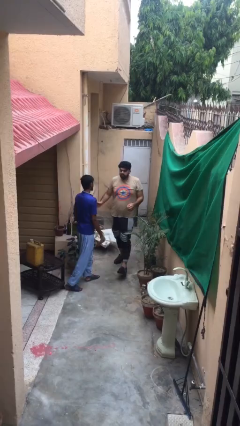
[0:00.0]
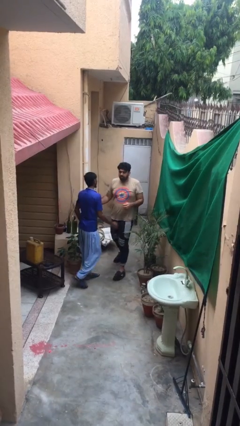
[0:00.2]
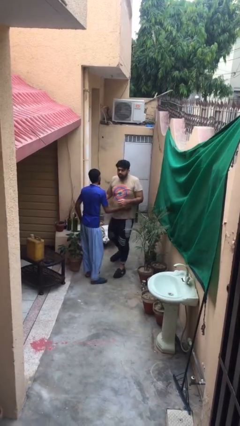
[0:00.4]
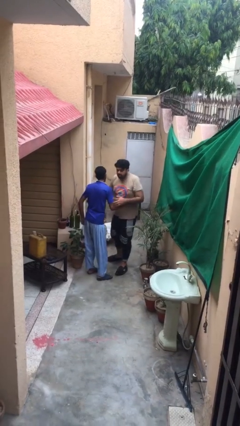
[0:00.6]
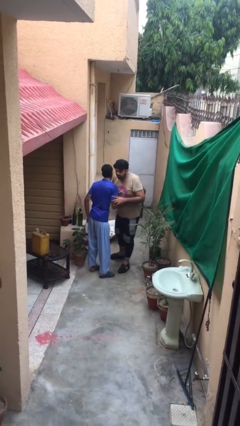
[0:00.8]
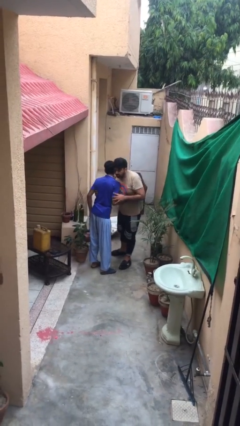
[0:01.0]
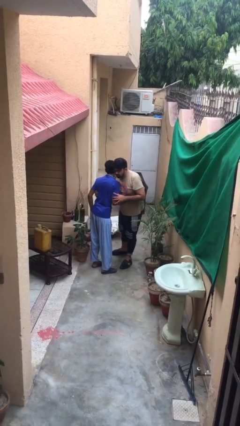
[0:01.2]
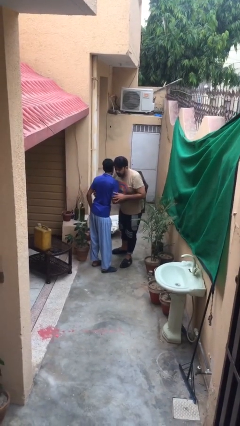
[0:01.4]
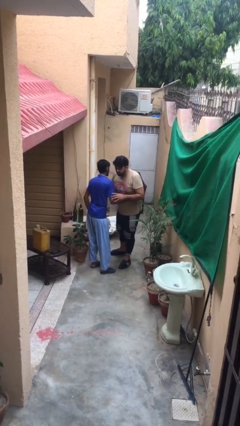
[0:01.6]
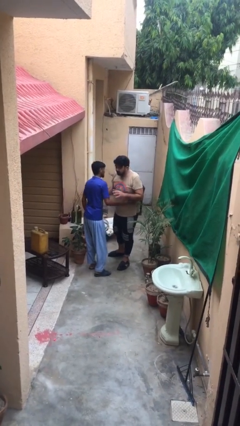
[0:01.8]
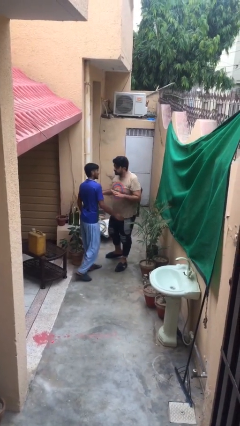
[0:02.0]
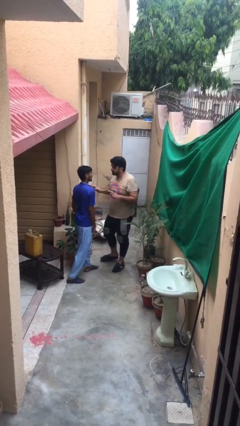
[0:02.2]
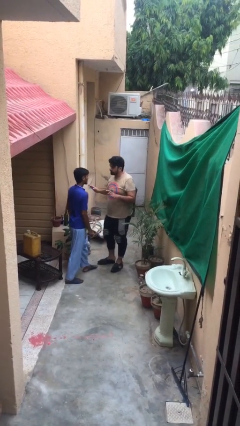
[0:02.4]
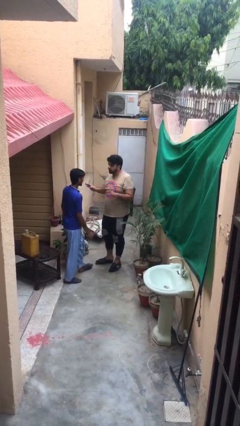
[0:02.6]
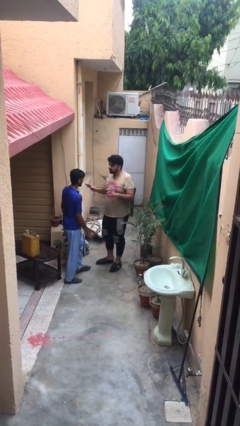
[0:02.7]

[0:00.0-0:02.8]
person embraces person

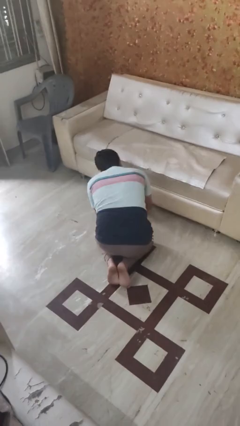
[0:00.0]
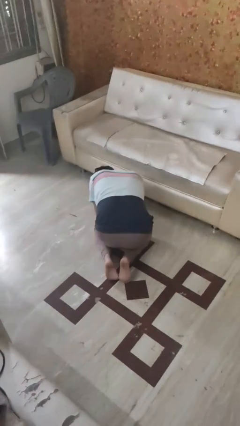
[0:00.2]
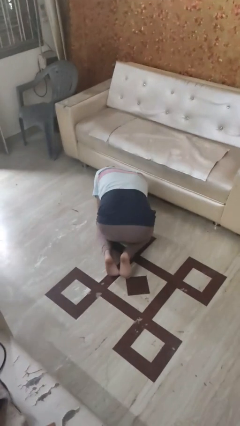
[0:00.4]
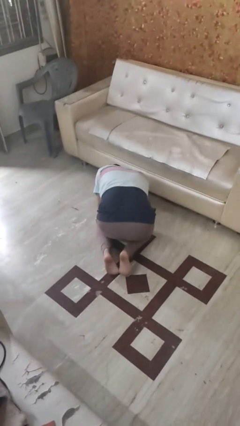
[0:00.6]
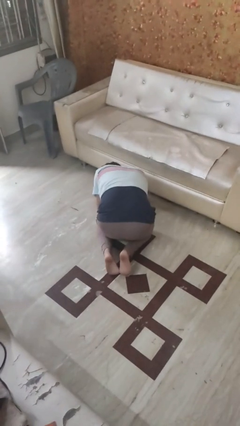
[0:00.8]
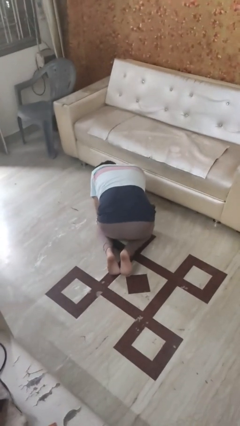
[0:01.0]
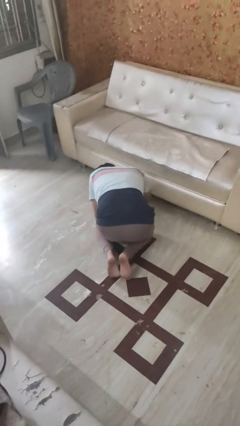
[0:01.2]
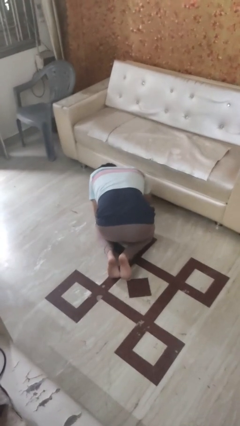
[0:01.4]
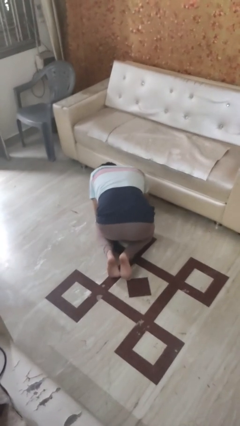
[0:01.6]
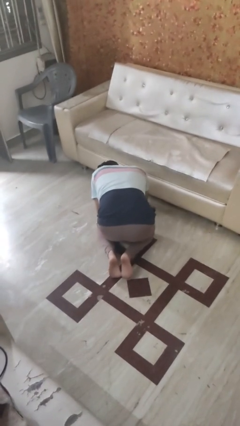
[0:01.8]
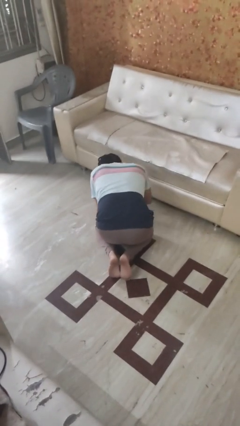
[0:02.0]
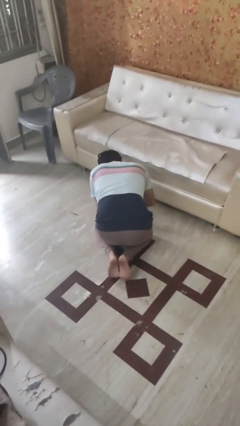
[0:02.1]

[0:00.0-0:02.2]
person searches under bed

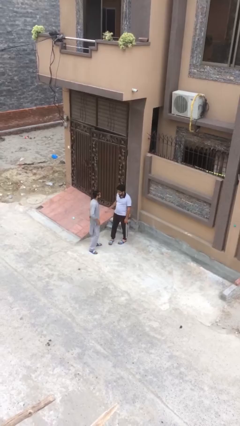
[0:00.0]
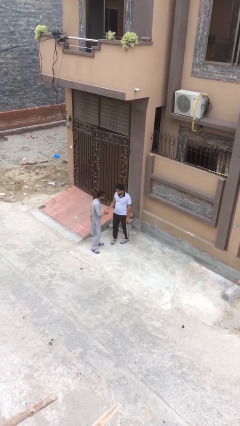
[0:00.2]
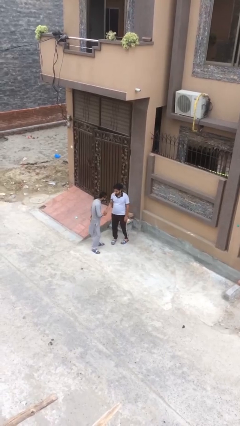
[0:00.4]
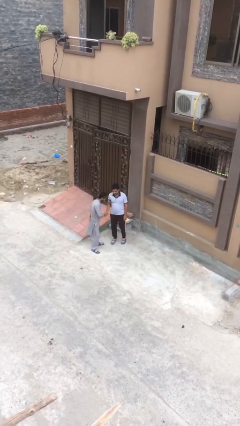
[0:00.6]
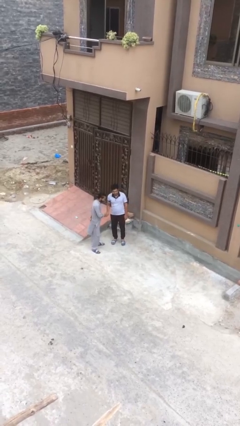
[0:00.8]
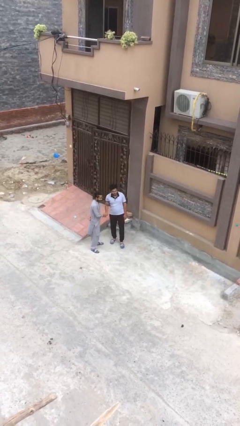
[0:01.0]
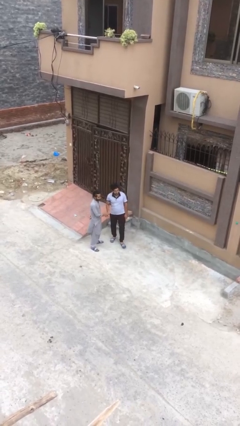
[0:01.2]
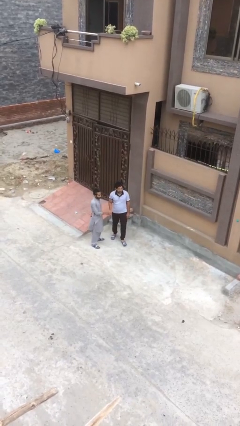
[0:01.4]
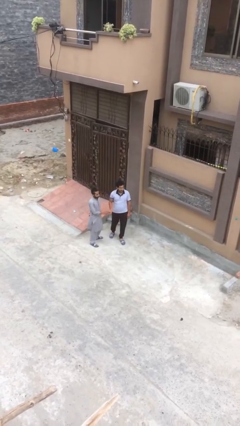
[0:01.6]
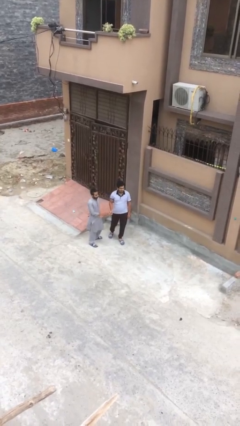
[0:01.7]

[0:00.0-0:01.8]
person shakes hand

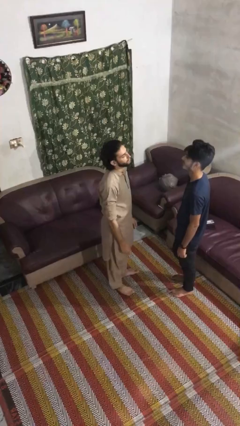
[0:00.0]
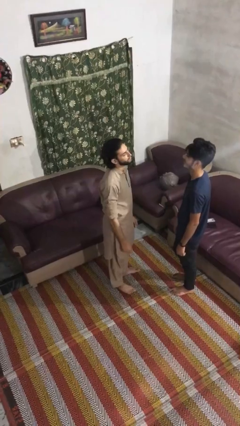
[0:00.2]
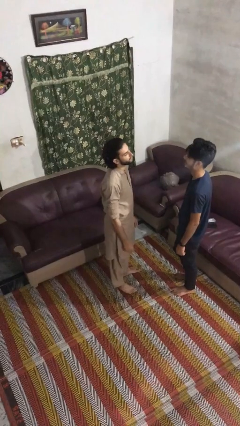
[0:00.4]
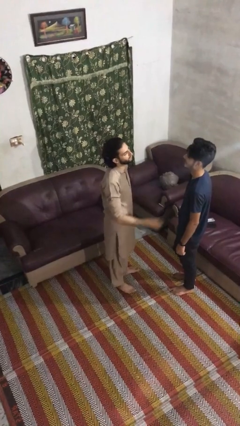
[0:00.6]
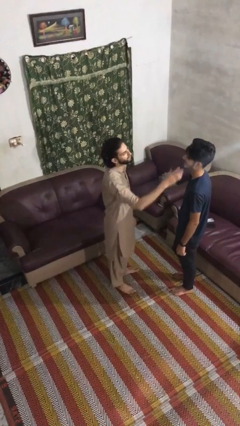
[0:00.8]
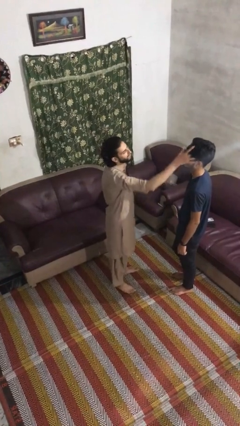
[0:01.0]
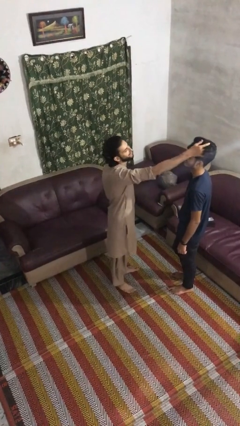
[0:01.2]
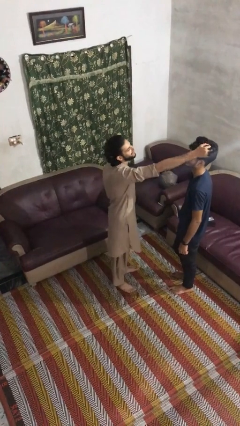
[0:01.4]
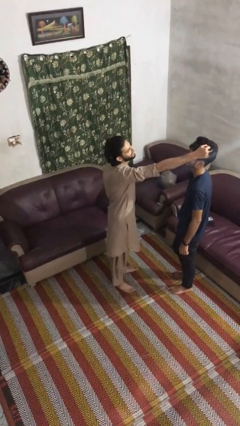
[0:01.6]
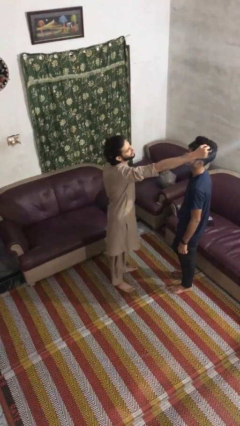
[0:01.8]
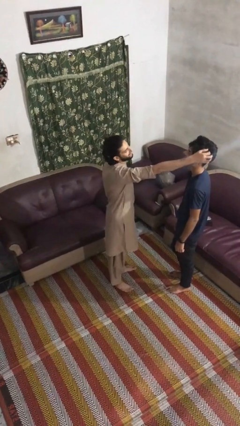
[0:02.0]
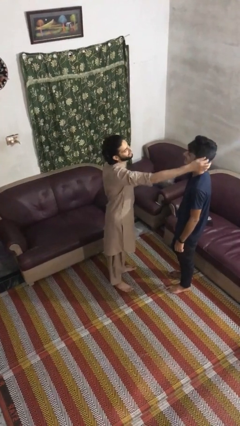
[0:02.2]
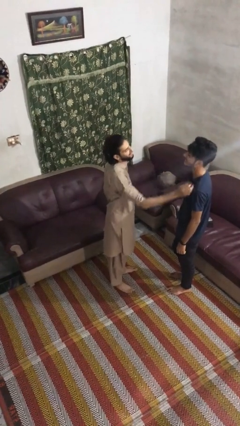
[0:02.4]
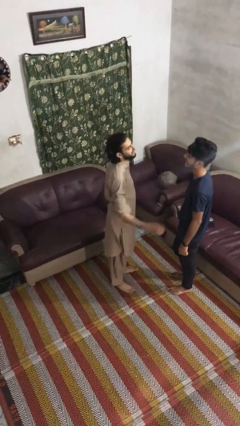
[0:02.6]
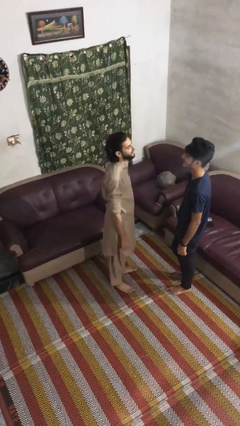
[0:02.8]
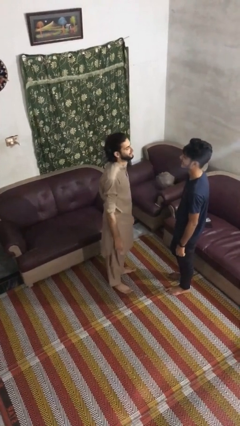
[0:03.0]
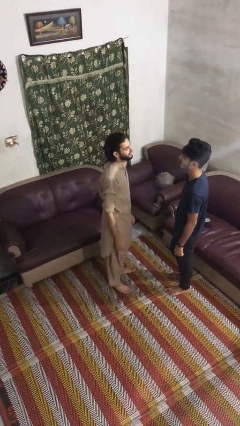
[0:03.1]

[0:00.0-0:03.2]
person grabs person by hair

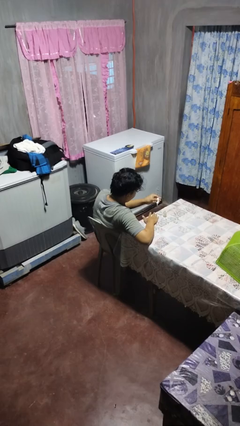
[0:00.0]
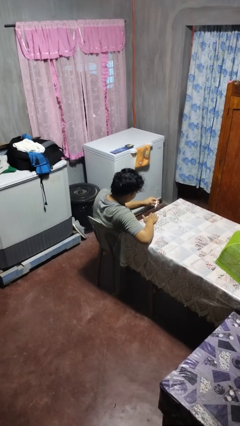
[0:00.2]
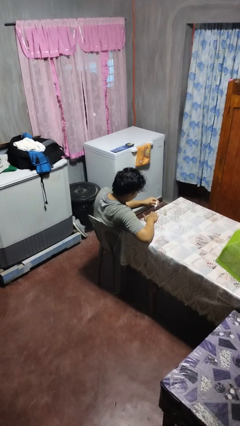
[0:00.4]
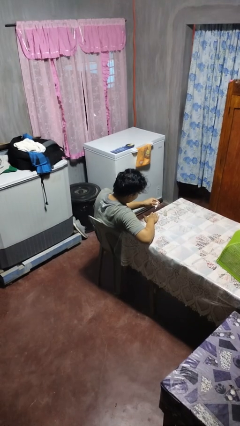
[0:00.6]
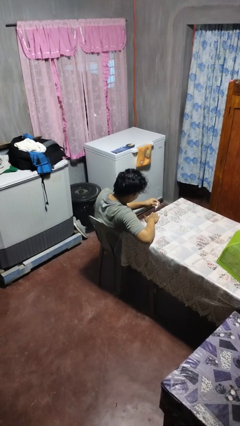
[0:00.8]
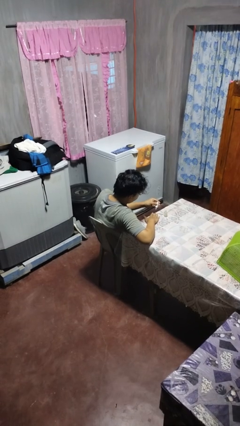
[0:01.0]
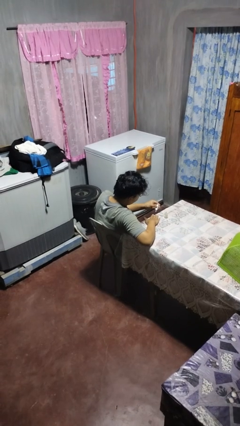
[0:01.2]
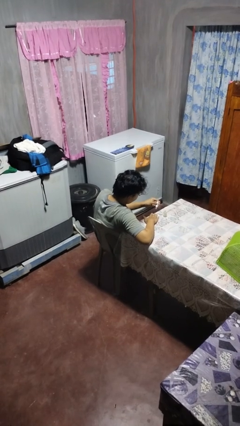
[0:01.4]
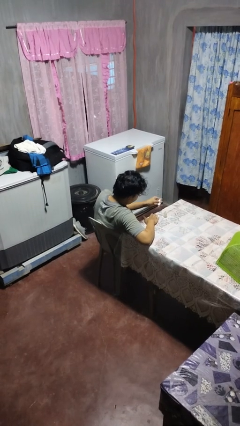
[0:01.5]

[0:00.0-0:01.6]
person paints fingernails

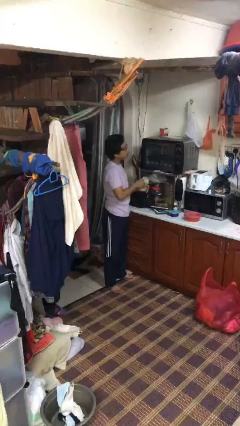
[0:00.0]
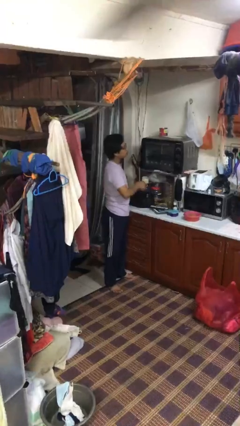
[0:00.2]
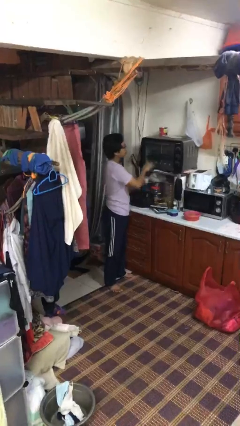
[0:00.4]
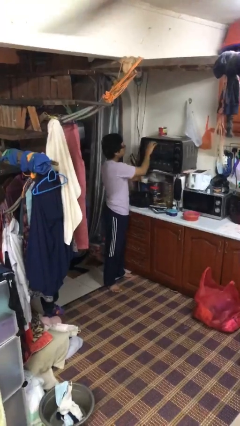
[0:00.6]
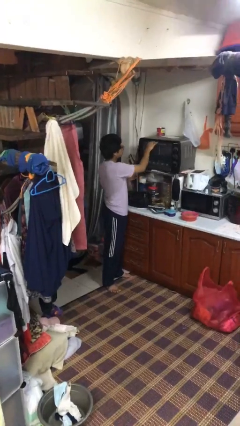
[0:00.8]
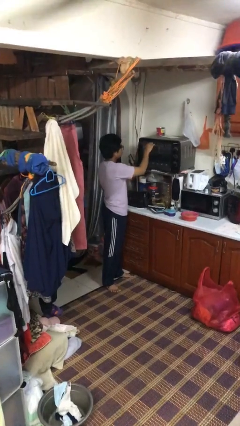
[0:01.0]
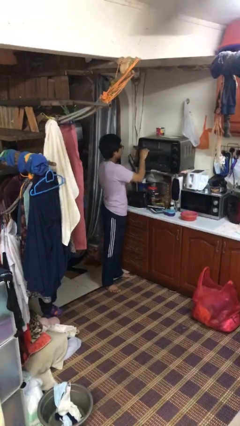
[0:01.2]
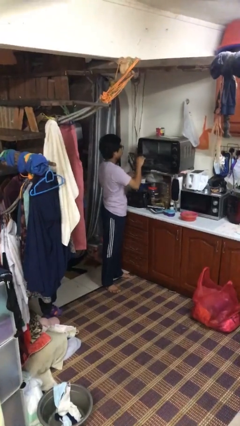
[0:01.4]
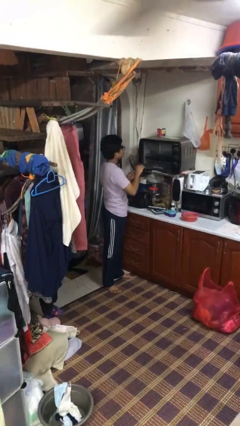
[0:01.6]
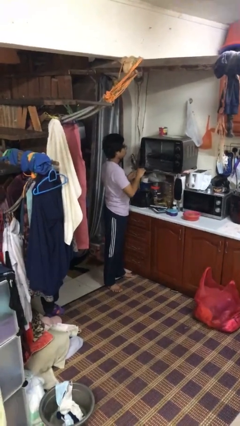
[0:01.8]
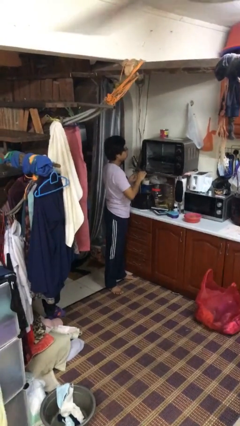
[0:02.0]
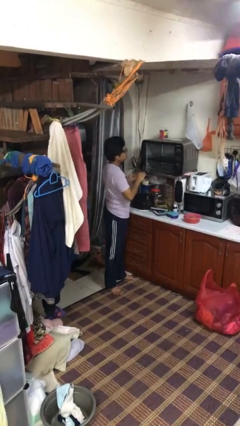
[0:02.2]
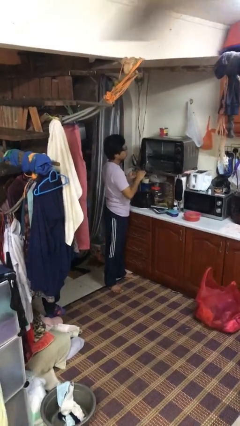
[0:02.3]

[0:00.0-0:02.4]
person opens oven door

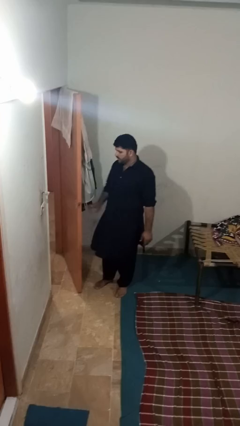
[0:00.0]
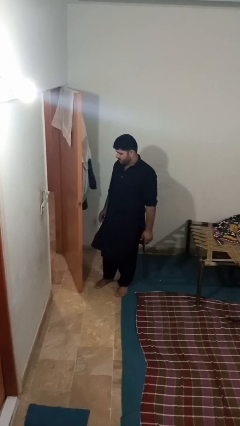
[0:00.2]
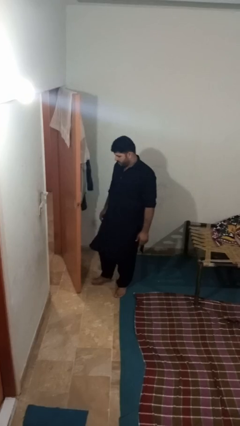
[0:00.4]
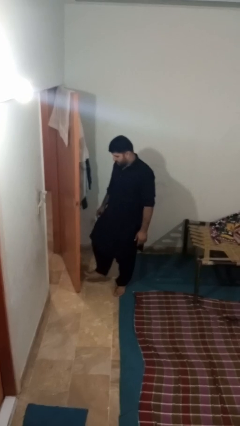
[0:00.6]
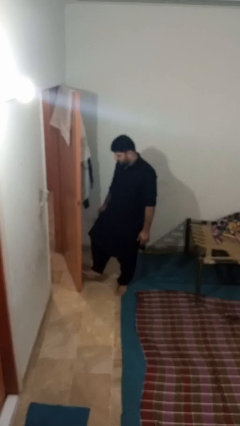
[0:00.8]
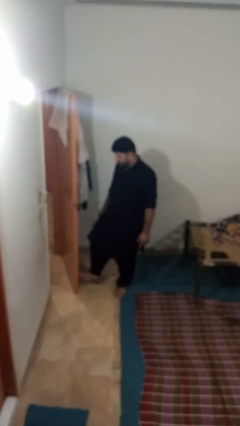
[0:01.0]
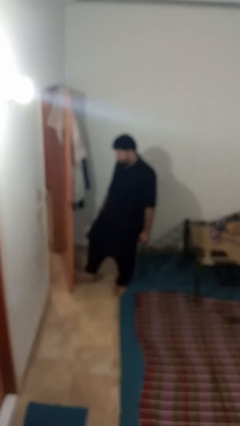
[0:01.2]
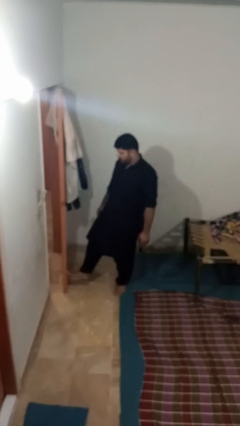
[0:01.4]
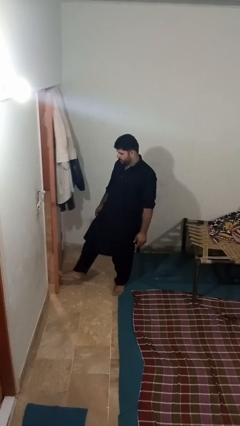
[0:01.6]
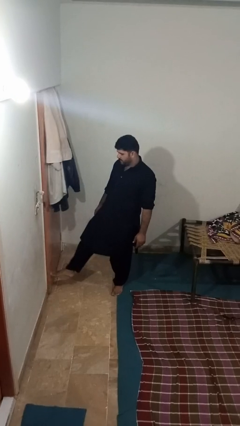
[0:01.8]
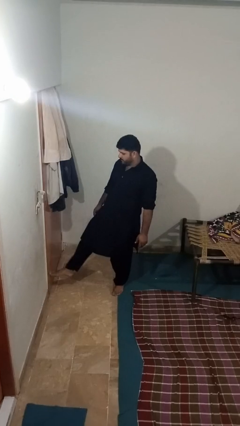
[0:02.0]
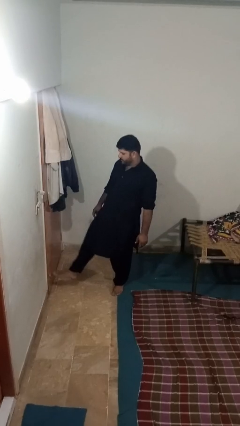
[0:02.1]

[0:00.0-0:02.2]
person closes door with foot

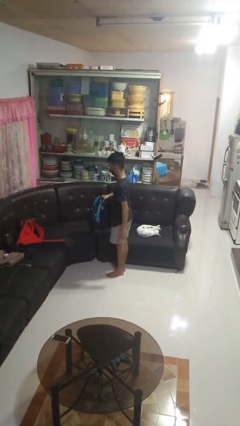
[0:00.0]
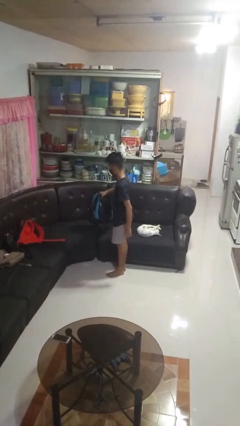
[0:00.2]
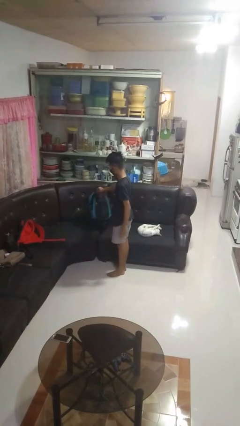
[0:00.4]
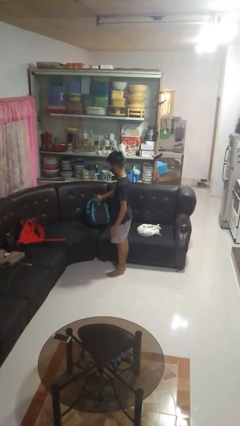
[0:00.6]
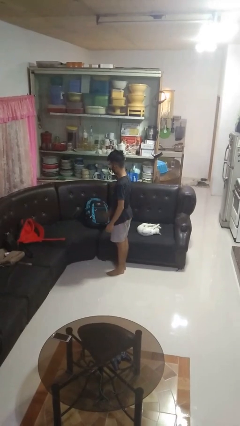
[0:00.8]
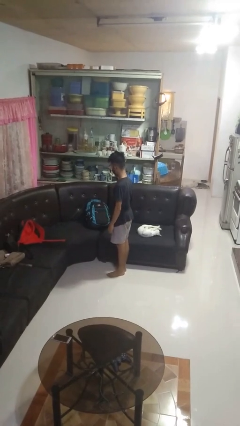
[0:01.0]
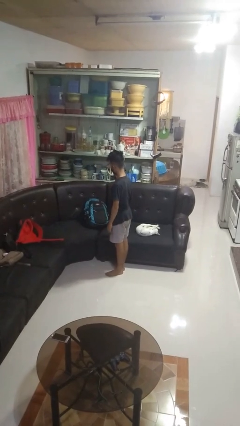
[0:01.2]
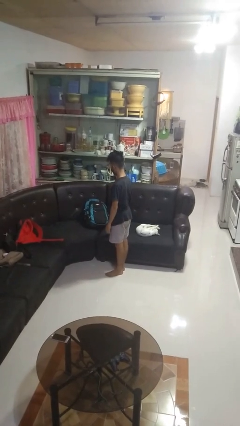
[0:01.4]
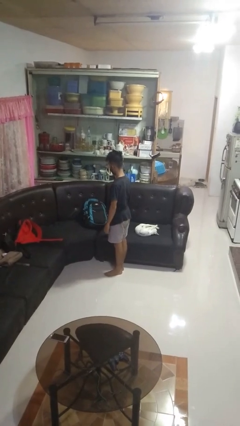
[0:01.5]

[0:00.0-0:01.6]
person puts down object on couch
